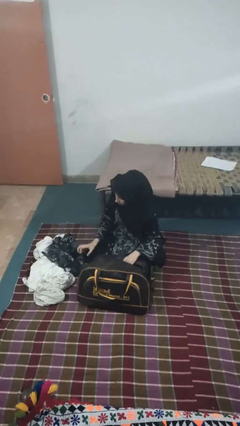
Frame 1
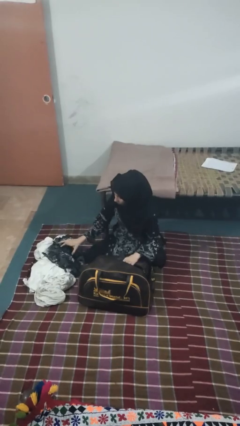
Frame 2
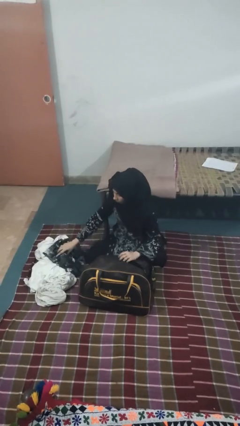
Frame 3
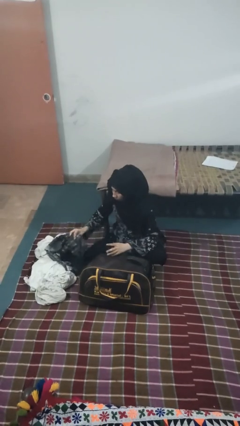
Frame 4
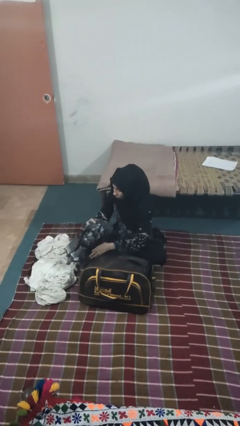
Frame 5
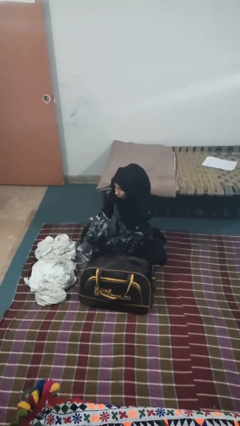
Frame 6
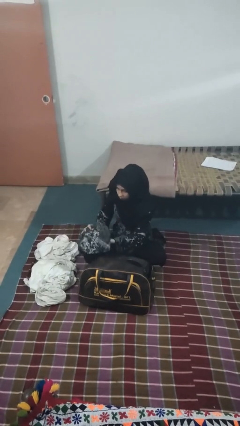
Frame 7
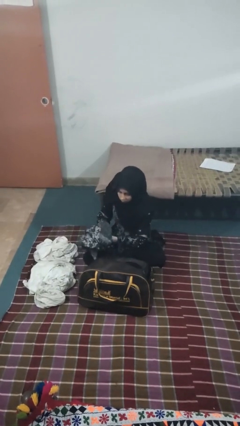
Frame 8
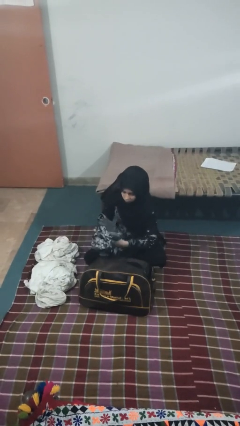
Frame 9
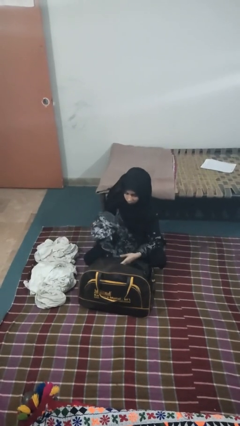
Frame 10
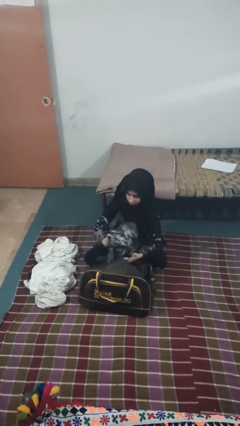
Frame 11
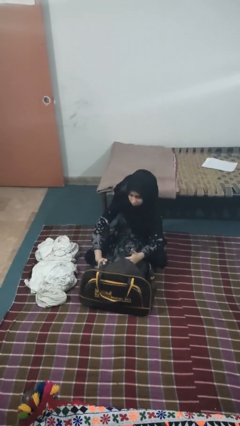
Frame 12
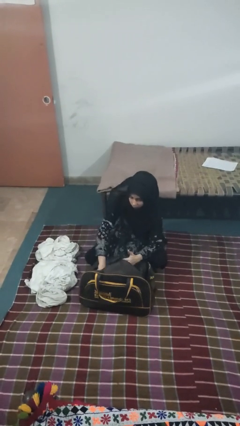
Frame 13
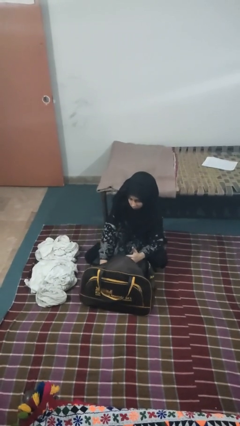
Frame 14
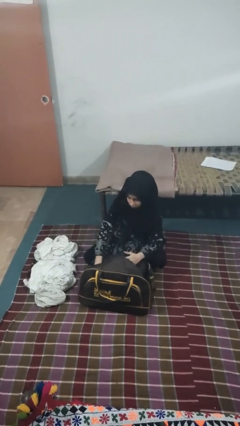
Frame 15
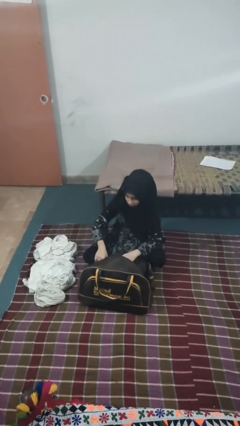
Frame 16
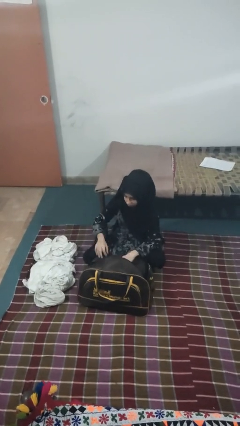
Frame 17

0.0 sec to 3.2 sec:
person loads clothes into suitcase

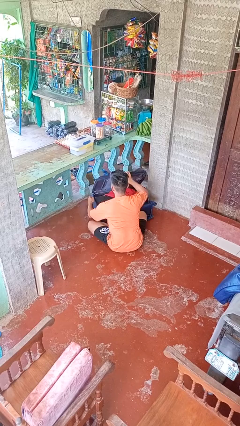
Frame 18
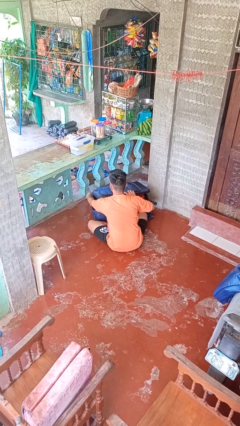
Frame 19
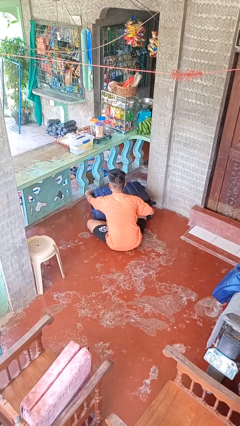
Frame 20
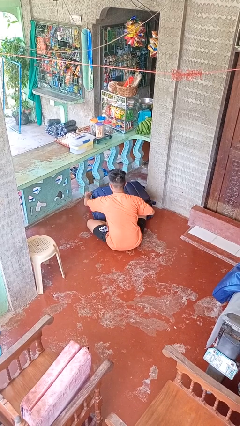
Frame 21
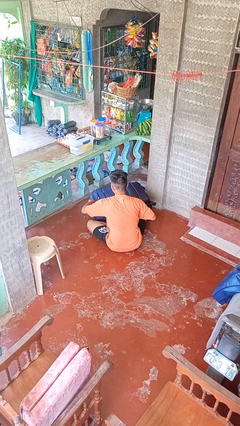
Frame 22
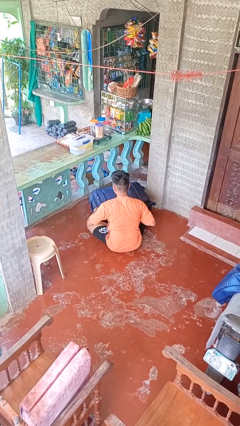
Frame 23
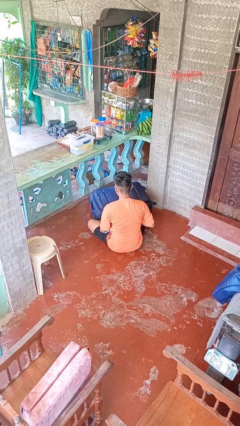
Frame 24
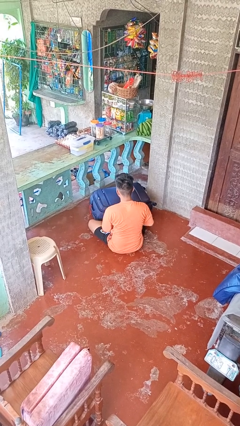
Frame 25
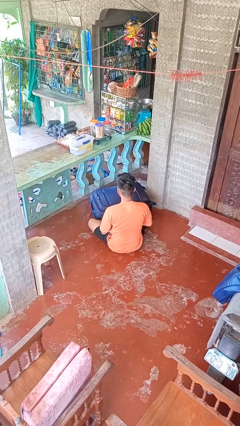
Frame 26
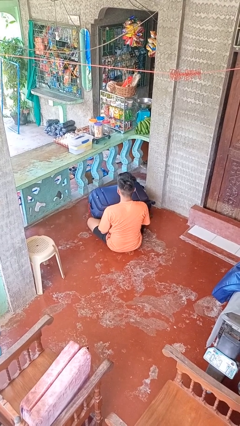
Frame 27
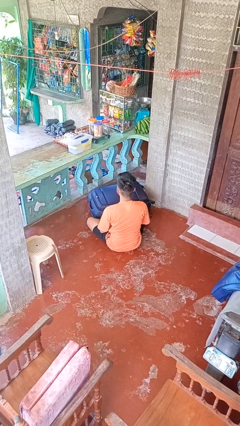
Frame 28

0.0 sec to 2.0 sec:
person closes suitcase

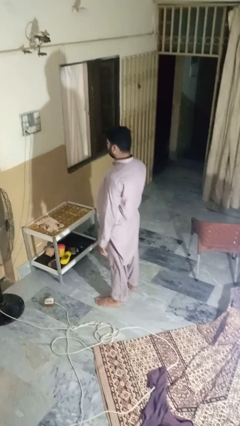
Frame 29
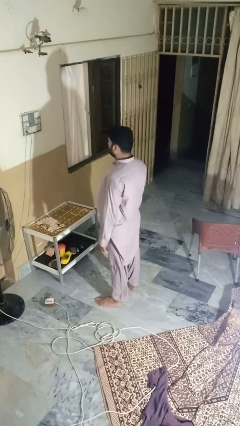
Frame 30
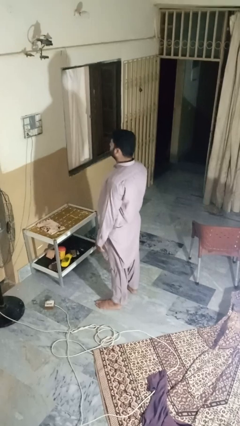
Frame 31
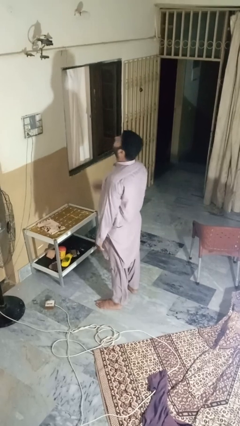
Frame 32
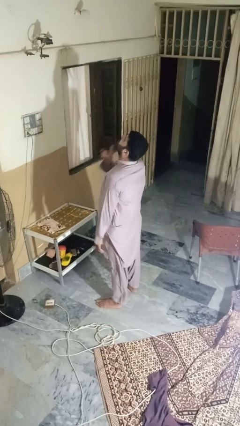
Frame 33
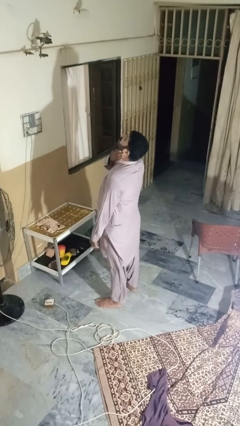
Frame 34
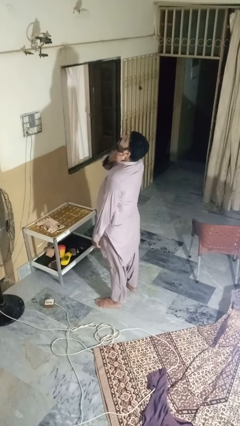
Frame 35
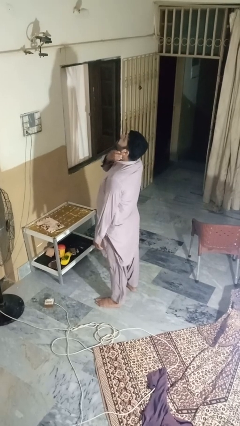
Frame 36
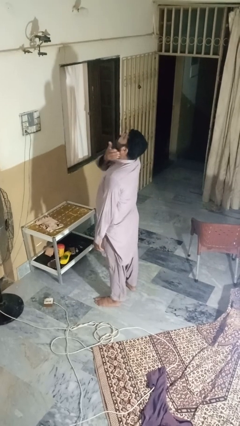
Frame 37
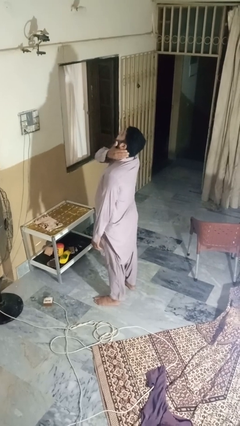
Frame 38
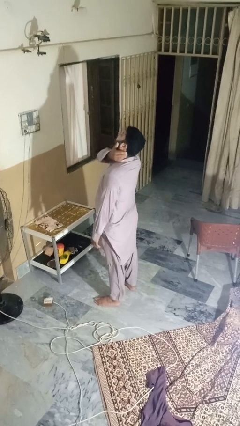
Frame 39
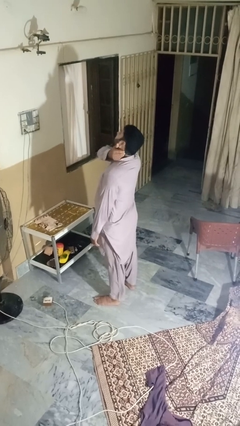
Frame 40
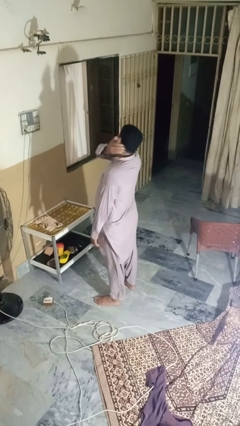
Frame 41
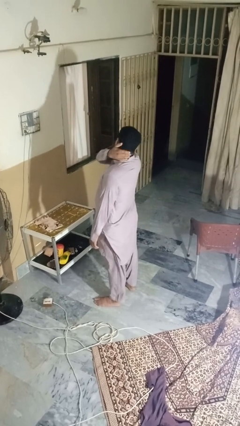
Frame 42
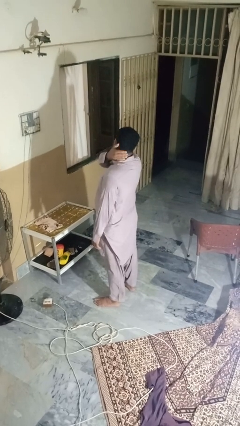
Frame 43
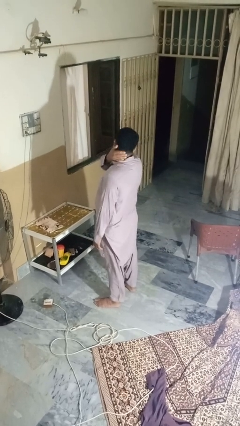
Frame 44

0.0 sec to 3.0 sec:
person rubs neck

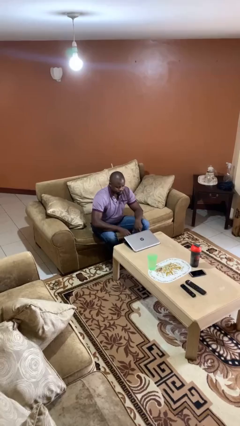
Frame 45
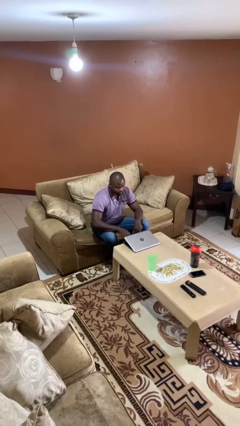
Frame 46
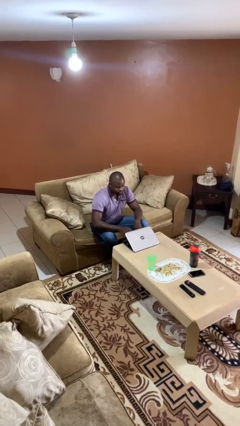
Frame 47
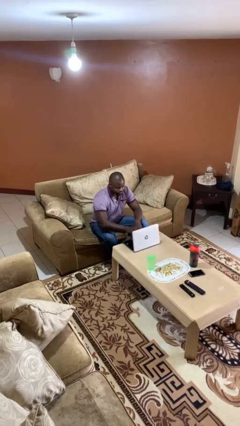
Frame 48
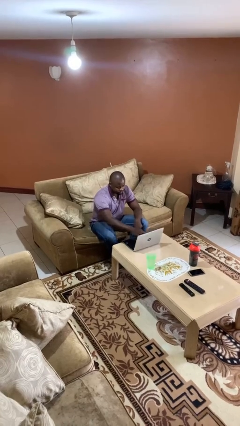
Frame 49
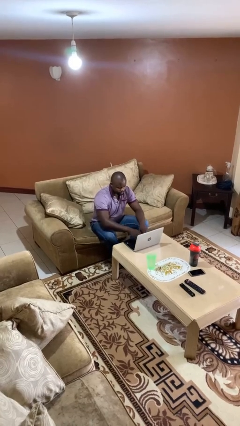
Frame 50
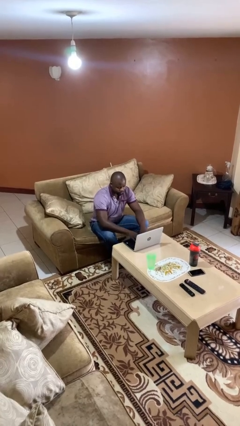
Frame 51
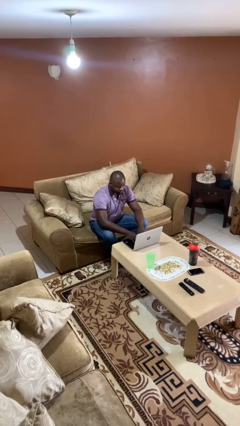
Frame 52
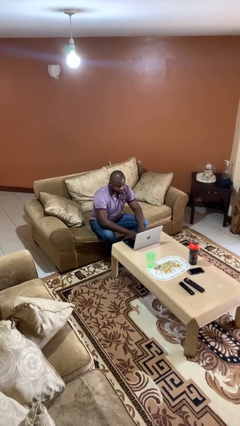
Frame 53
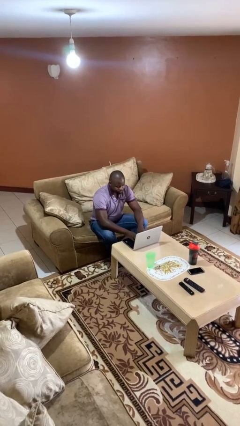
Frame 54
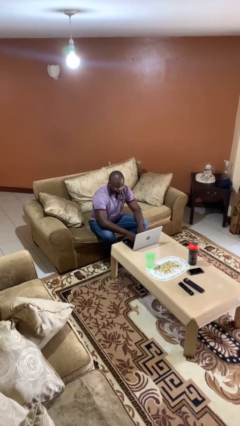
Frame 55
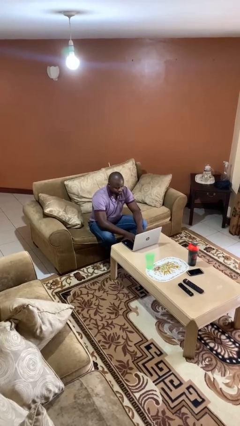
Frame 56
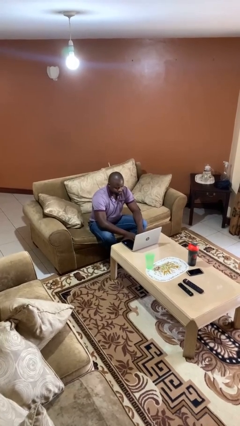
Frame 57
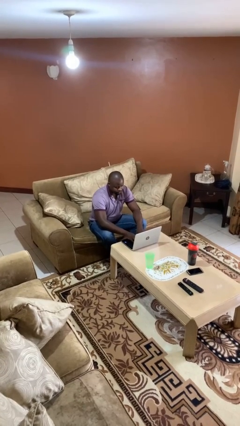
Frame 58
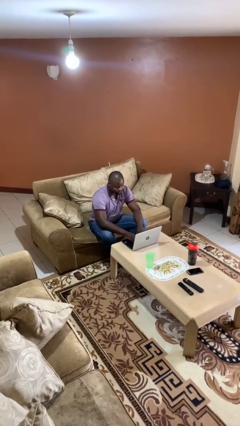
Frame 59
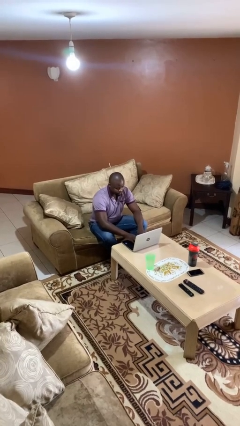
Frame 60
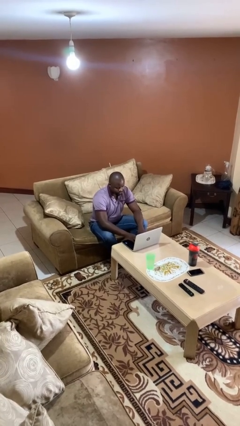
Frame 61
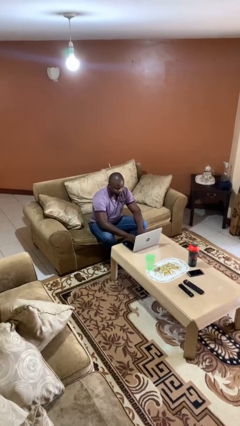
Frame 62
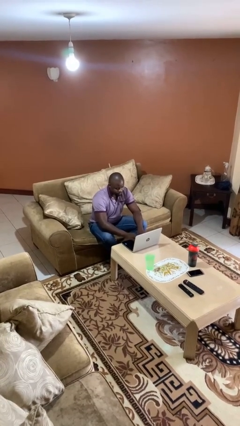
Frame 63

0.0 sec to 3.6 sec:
person interacts with laptop

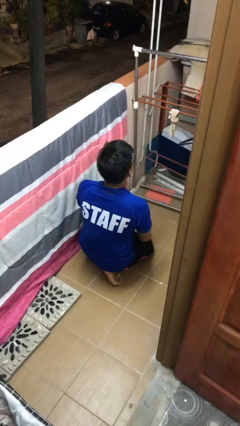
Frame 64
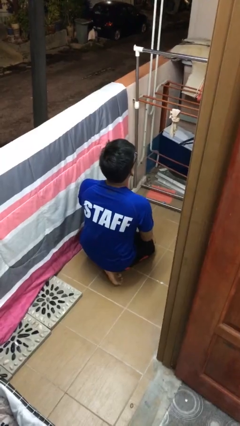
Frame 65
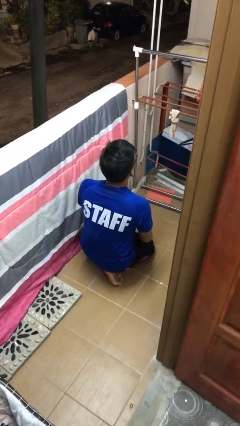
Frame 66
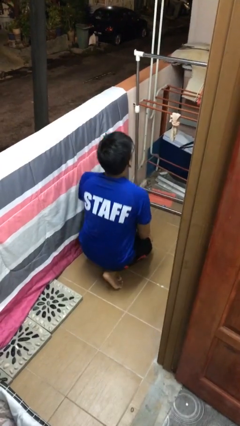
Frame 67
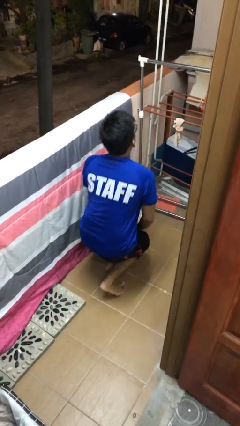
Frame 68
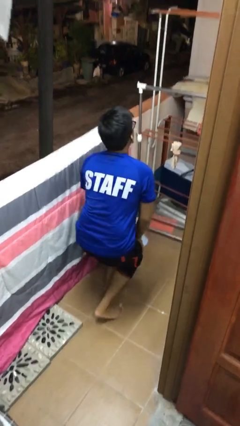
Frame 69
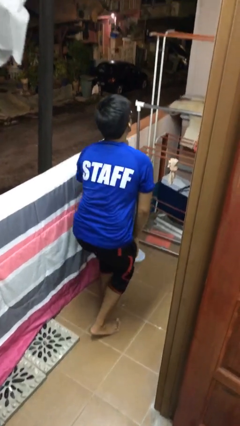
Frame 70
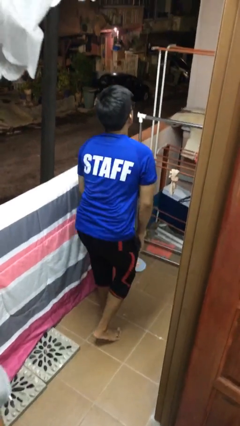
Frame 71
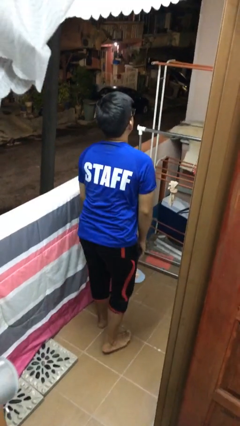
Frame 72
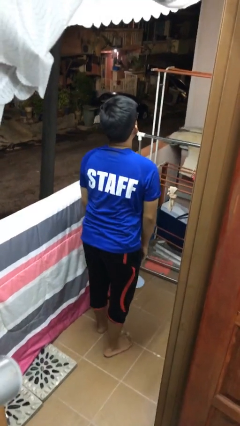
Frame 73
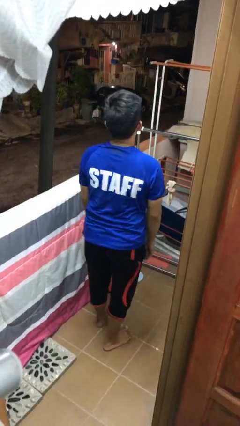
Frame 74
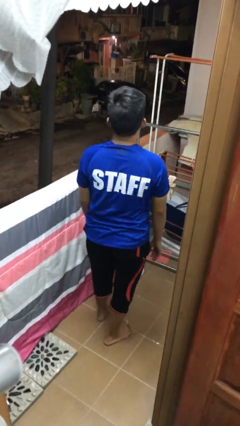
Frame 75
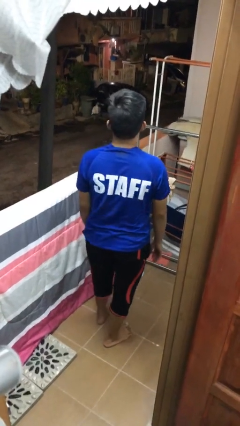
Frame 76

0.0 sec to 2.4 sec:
person stands up from floor

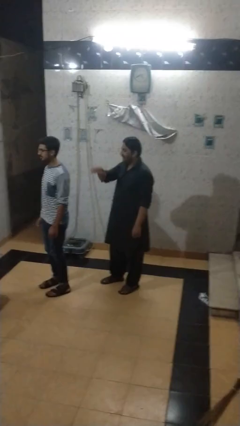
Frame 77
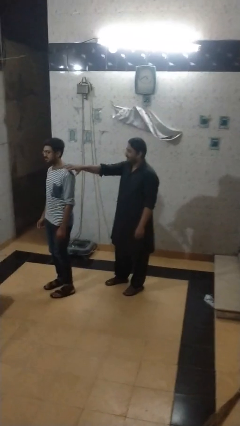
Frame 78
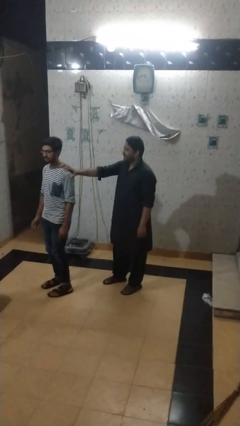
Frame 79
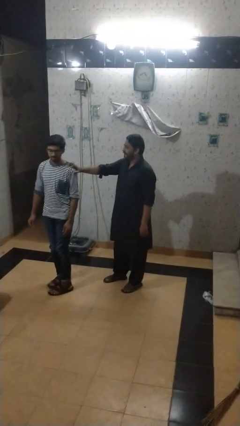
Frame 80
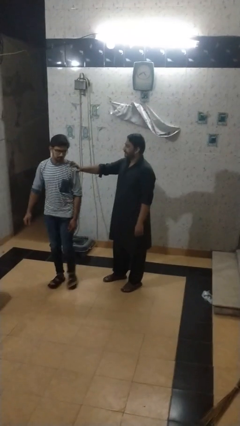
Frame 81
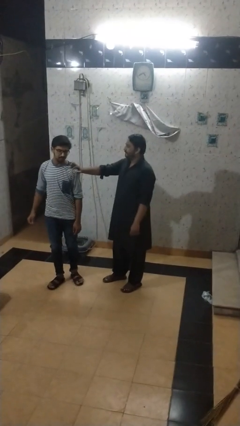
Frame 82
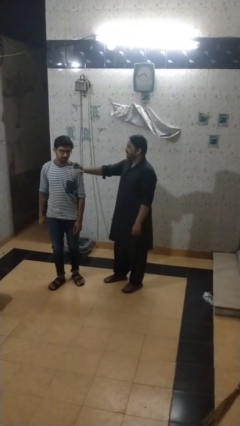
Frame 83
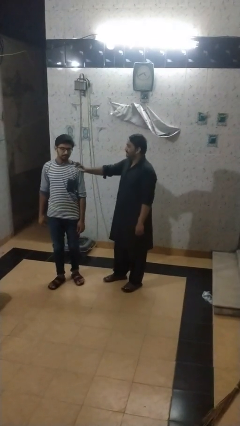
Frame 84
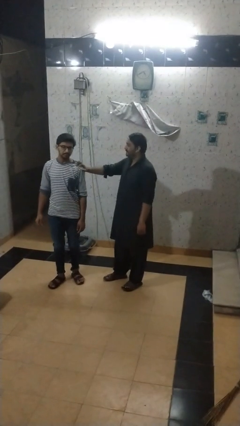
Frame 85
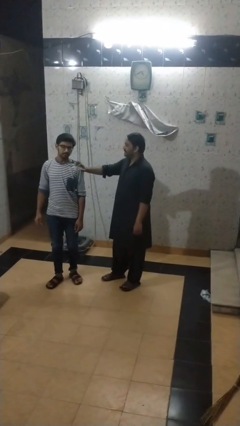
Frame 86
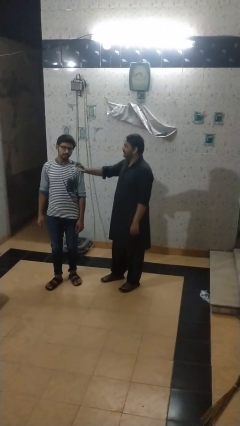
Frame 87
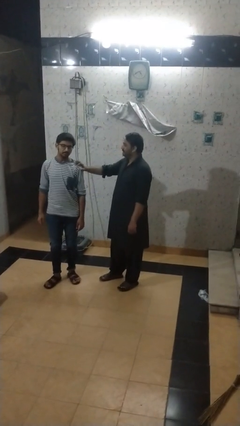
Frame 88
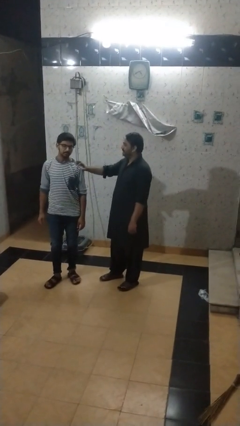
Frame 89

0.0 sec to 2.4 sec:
person grabs person by shoulder

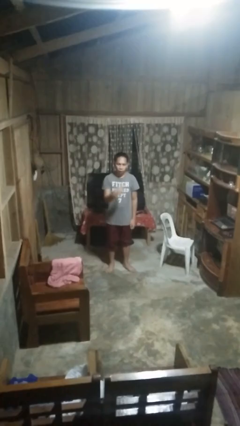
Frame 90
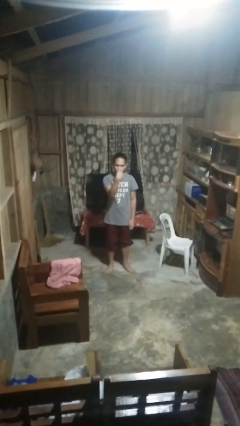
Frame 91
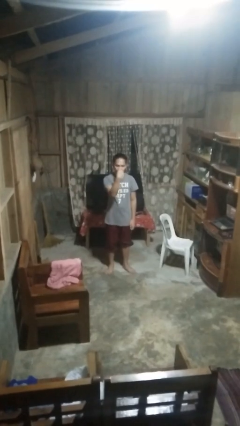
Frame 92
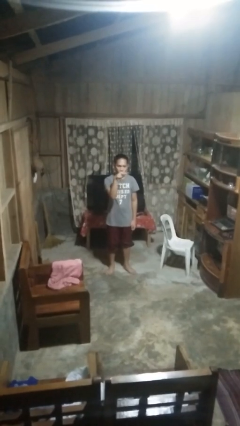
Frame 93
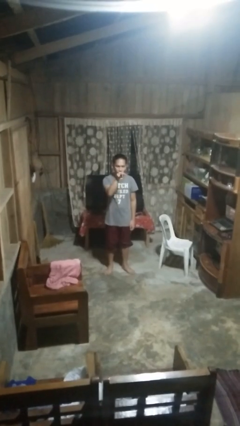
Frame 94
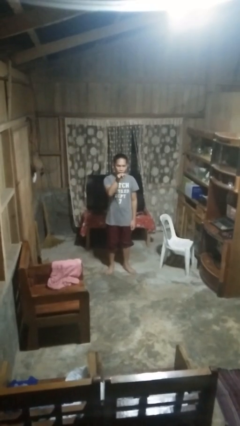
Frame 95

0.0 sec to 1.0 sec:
person gestures watch closely
